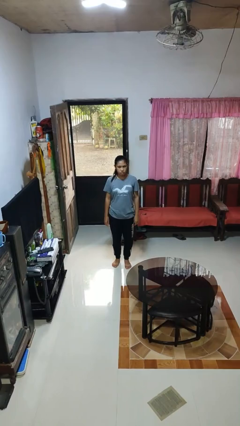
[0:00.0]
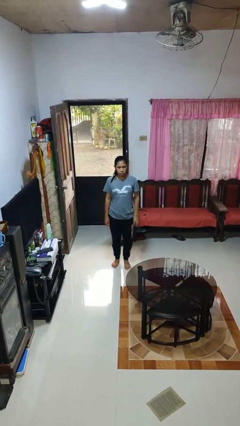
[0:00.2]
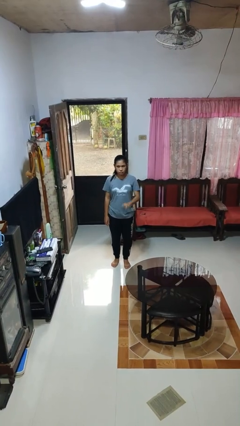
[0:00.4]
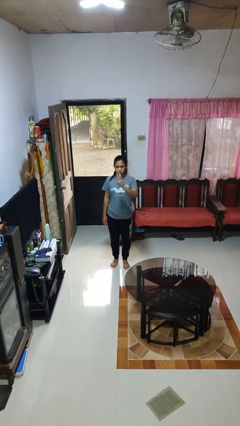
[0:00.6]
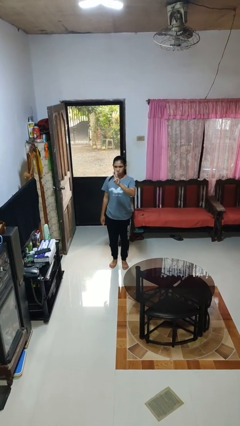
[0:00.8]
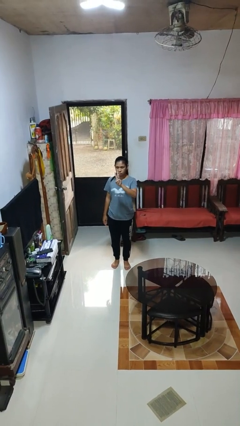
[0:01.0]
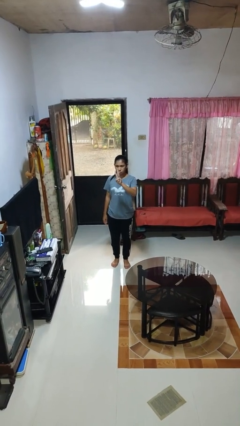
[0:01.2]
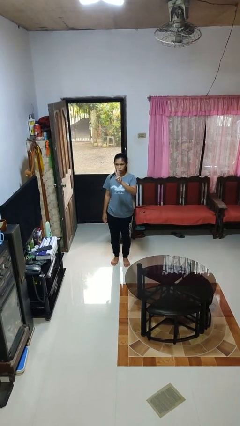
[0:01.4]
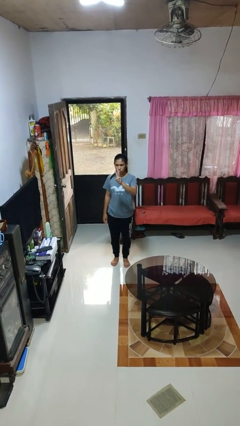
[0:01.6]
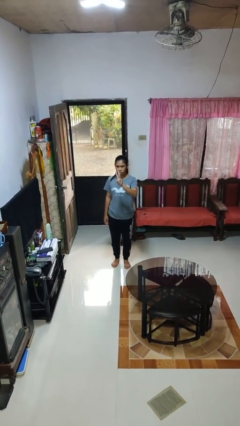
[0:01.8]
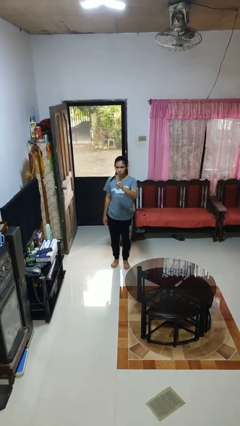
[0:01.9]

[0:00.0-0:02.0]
person gestures number three

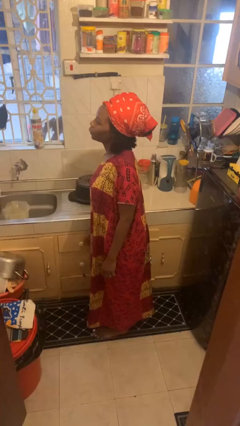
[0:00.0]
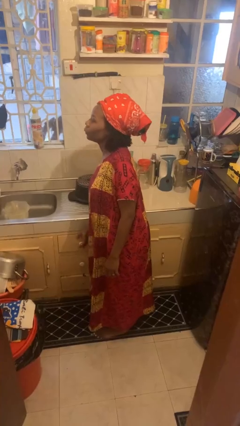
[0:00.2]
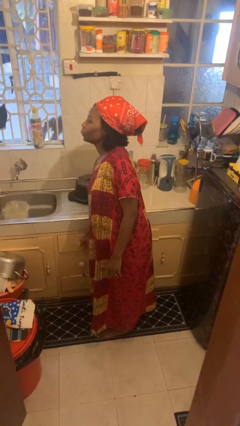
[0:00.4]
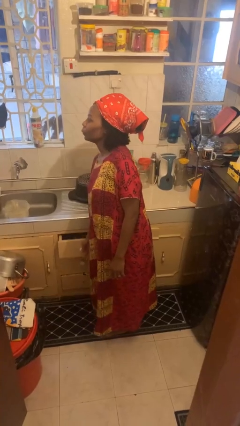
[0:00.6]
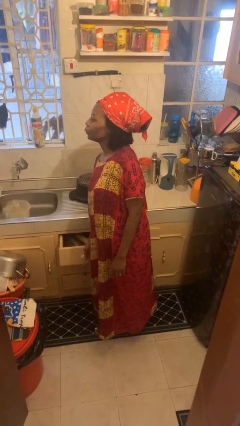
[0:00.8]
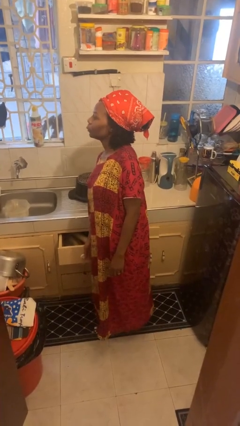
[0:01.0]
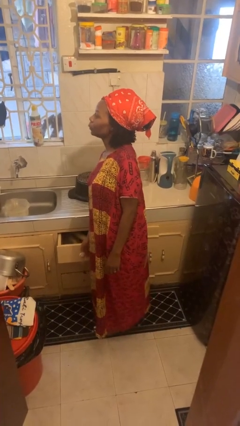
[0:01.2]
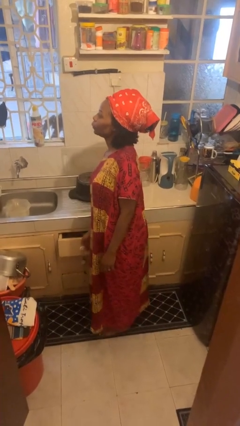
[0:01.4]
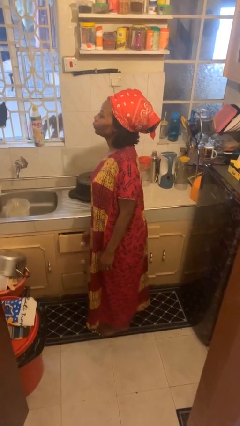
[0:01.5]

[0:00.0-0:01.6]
person opens kitchen drawer

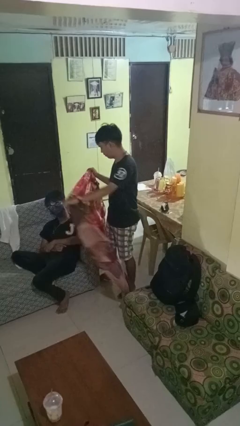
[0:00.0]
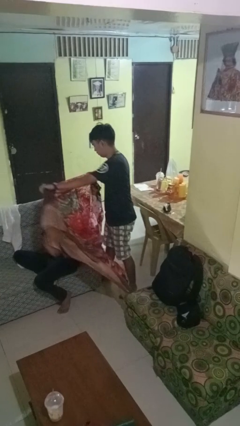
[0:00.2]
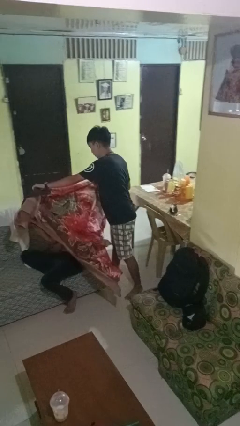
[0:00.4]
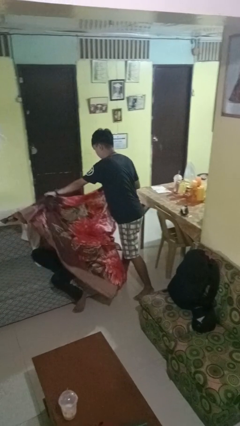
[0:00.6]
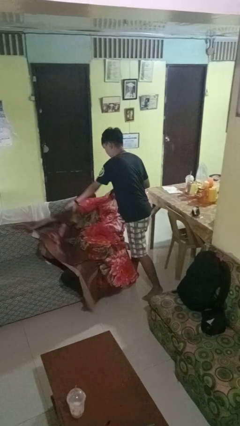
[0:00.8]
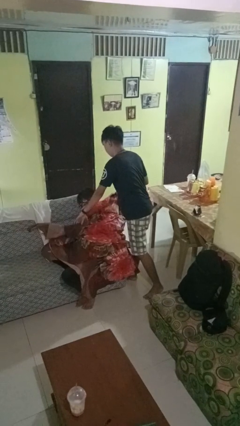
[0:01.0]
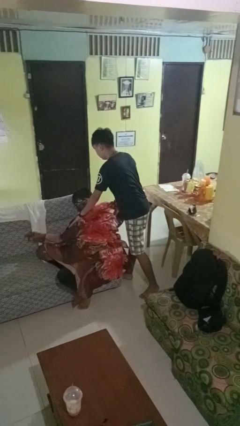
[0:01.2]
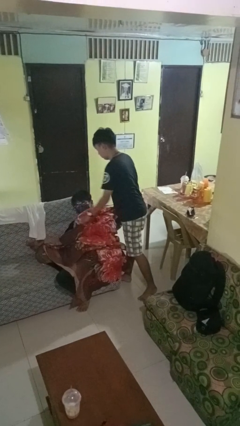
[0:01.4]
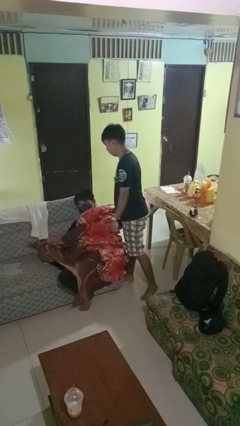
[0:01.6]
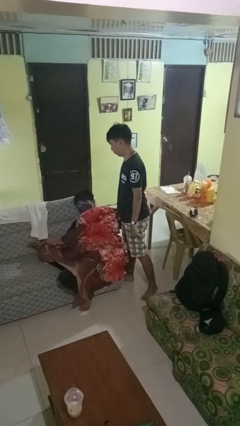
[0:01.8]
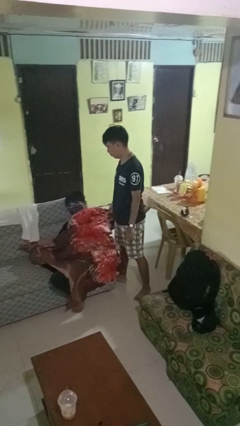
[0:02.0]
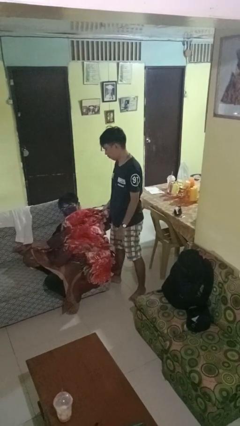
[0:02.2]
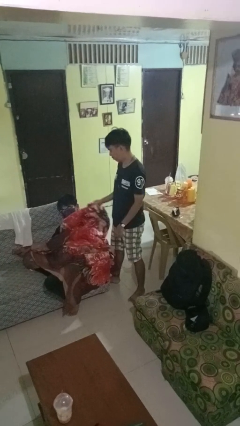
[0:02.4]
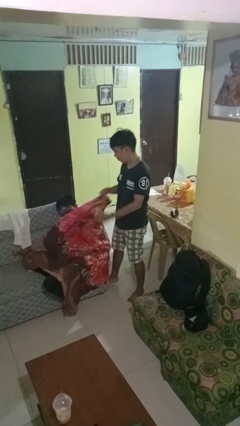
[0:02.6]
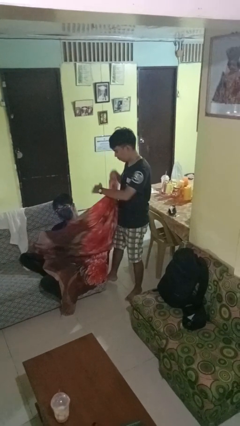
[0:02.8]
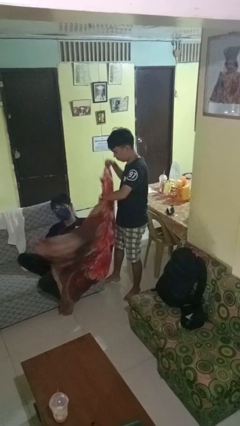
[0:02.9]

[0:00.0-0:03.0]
person covers friend with blanket

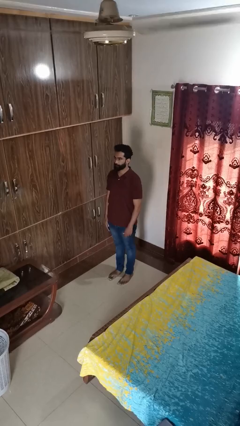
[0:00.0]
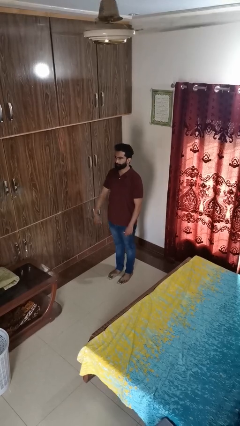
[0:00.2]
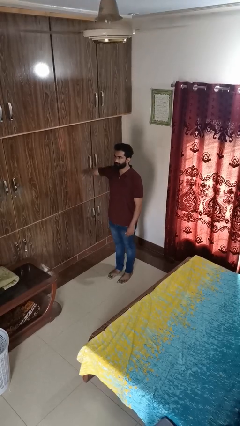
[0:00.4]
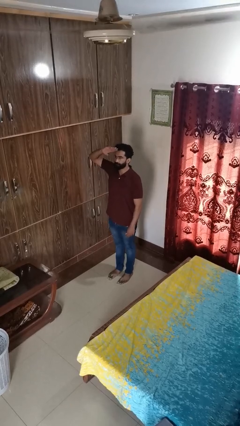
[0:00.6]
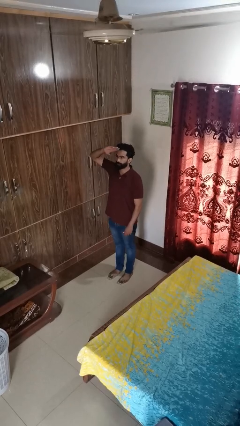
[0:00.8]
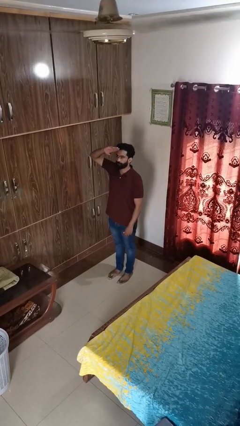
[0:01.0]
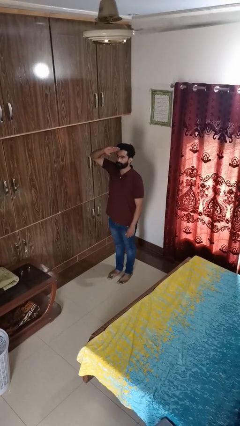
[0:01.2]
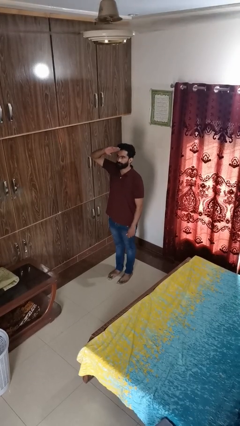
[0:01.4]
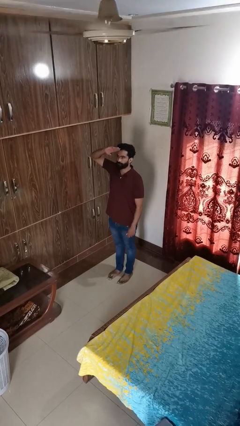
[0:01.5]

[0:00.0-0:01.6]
person salutes

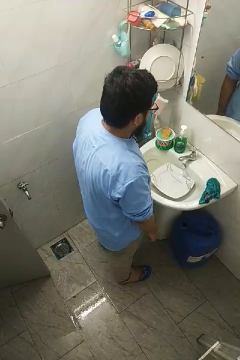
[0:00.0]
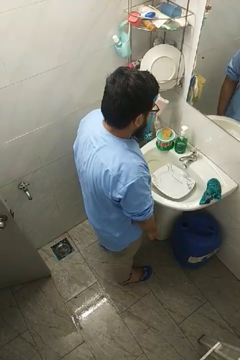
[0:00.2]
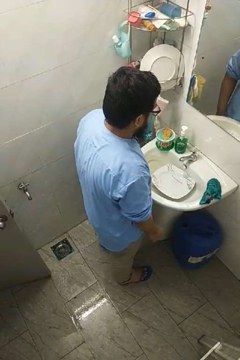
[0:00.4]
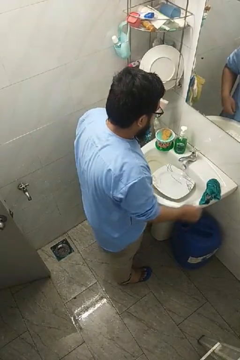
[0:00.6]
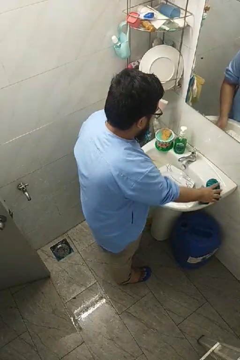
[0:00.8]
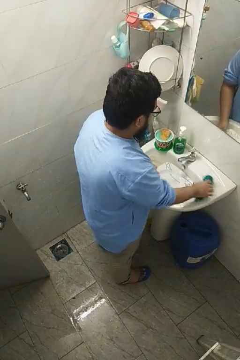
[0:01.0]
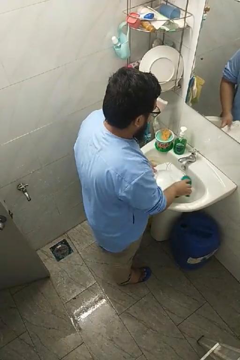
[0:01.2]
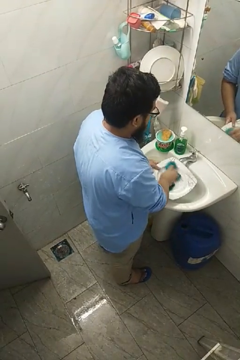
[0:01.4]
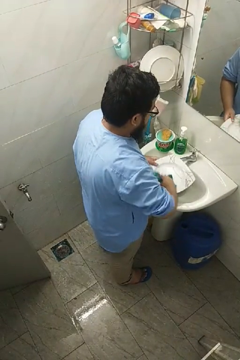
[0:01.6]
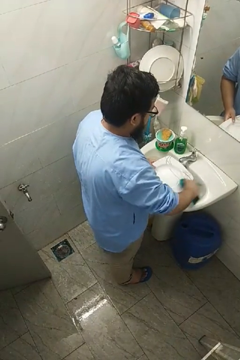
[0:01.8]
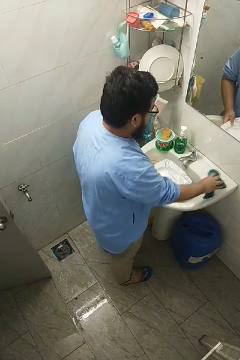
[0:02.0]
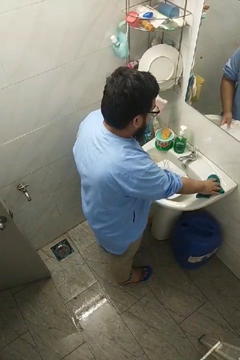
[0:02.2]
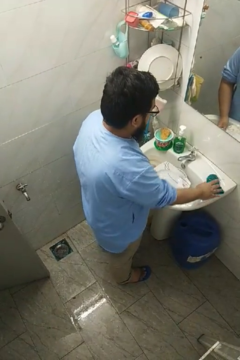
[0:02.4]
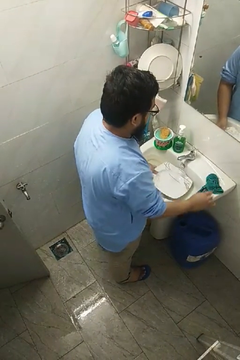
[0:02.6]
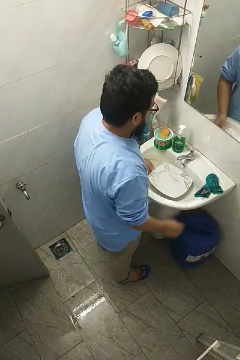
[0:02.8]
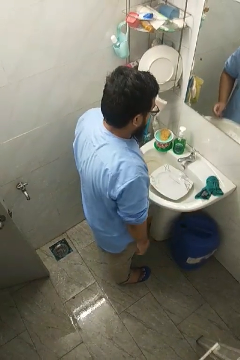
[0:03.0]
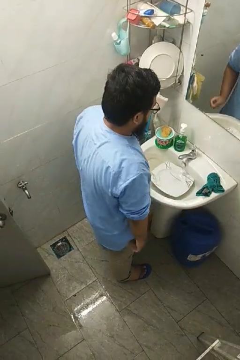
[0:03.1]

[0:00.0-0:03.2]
person dries dish

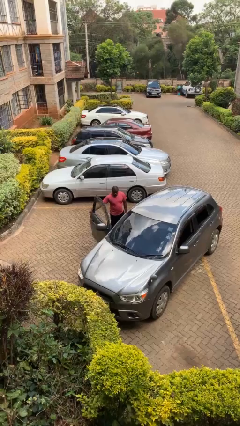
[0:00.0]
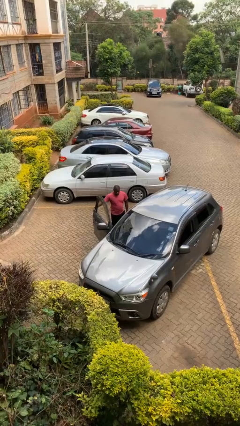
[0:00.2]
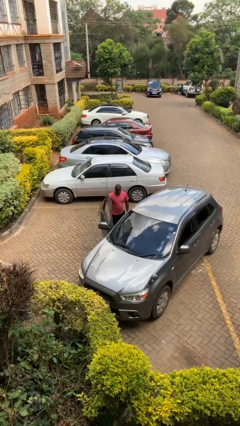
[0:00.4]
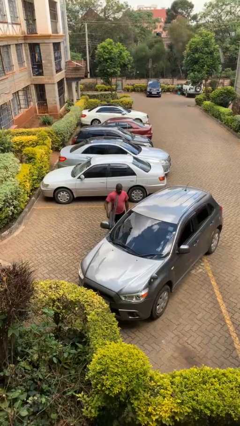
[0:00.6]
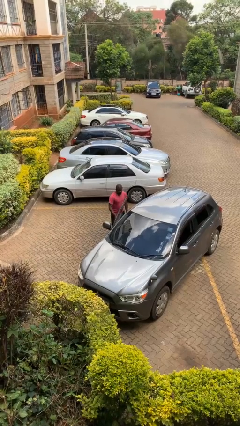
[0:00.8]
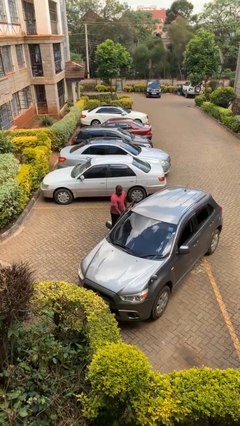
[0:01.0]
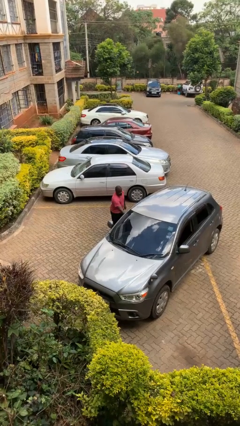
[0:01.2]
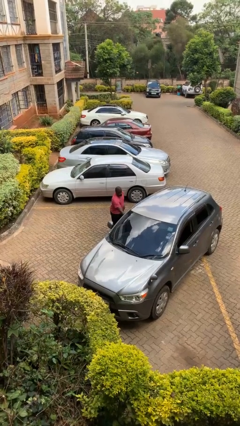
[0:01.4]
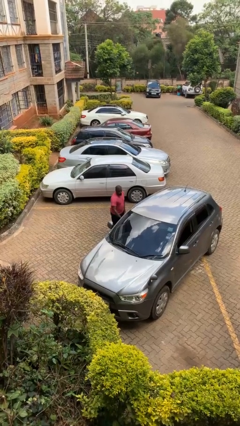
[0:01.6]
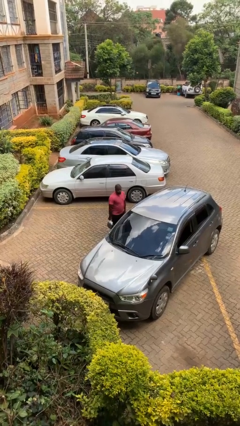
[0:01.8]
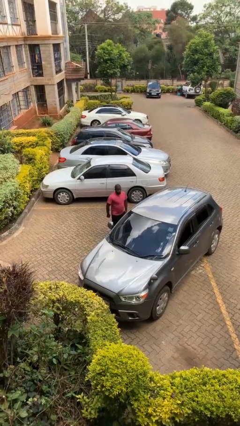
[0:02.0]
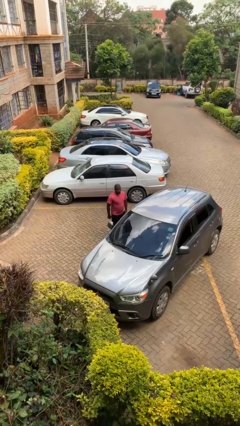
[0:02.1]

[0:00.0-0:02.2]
person closes car door

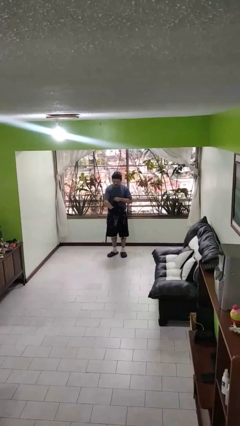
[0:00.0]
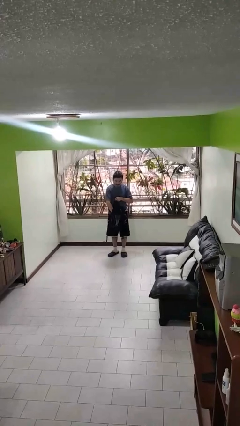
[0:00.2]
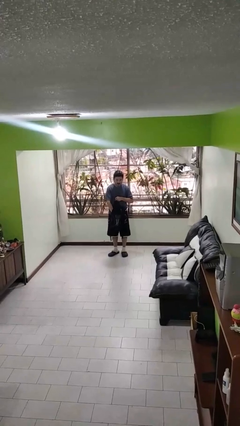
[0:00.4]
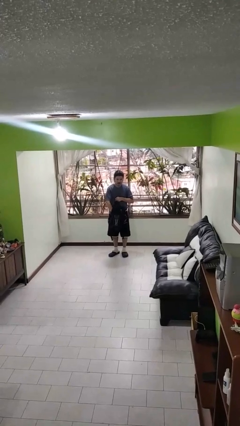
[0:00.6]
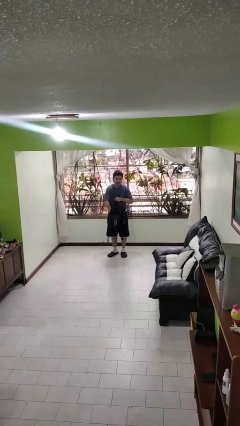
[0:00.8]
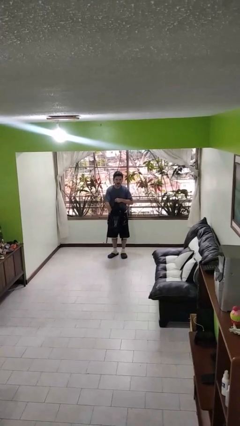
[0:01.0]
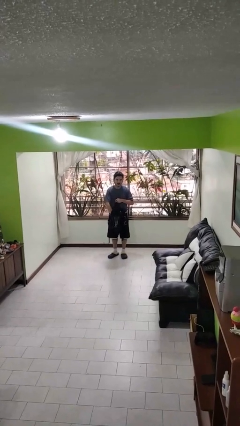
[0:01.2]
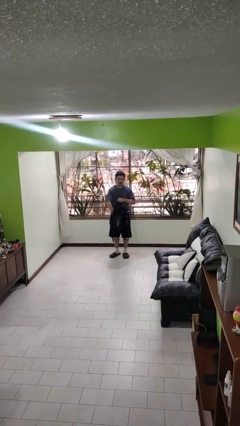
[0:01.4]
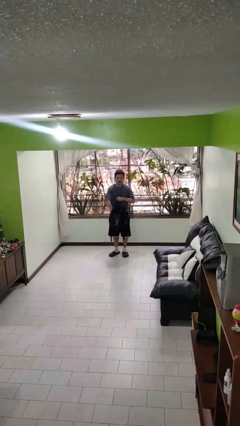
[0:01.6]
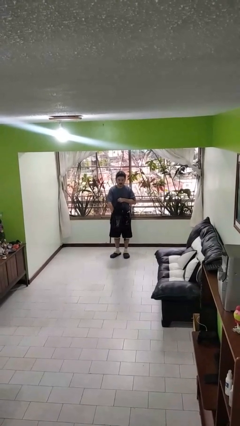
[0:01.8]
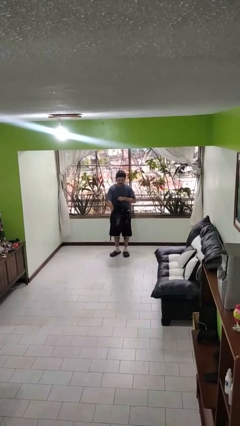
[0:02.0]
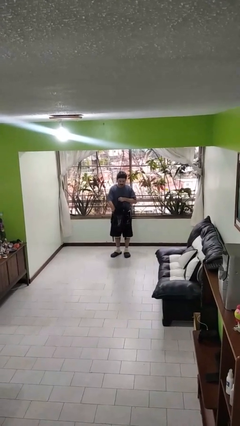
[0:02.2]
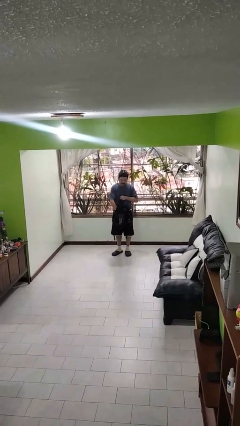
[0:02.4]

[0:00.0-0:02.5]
person searches in backpack

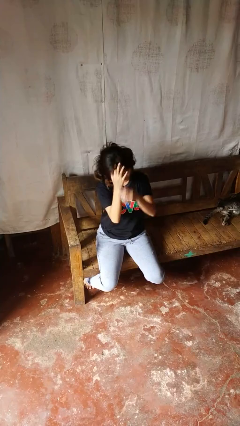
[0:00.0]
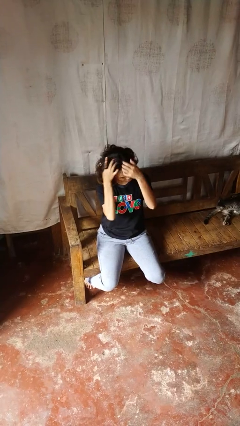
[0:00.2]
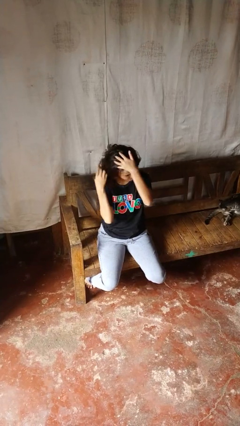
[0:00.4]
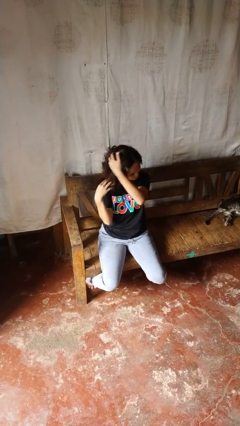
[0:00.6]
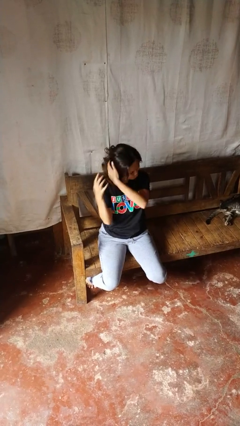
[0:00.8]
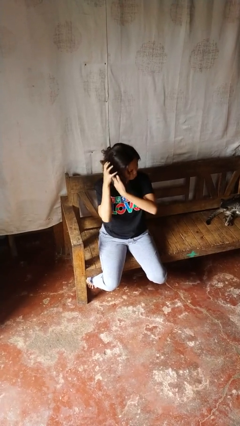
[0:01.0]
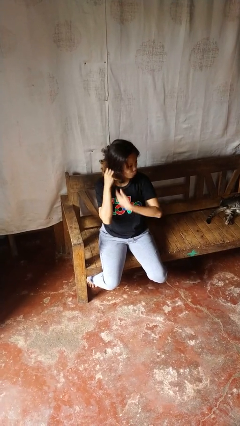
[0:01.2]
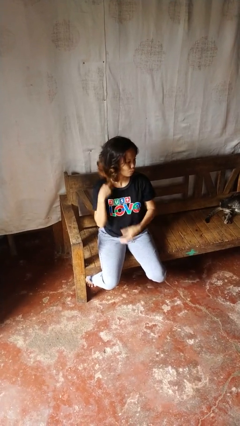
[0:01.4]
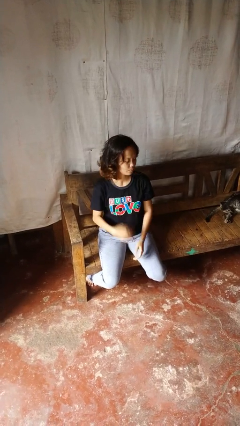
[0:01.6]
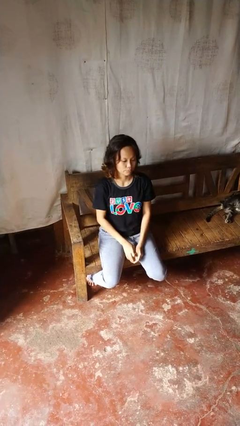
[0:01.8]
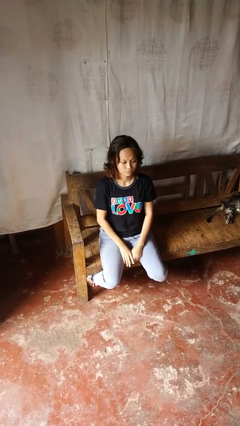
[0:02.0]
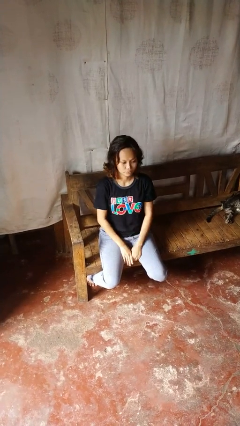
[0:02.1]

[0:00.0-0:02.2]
person strokes hair
